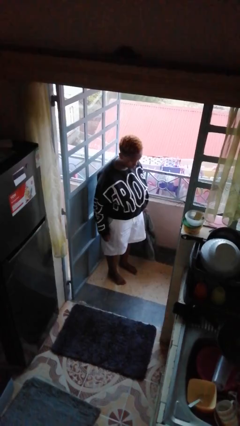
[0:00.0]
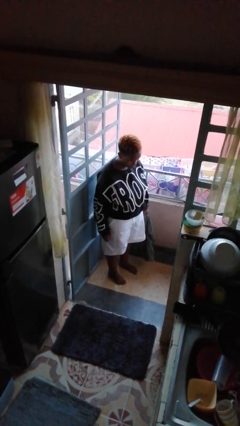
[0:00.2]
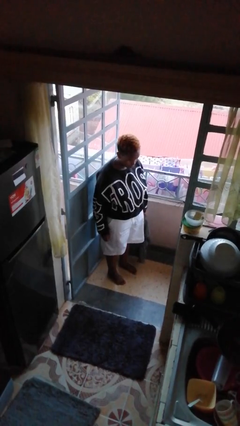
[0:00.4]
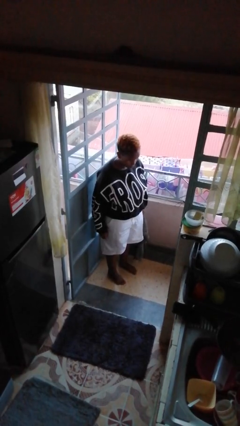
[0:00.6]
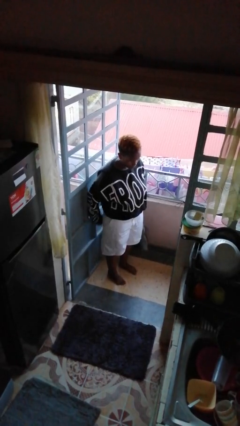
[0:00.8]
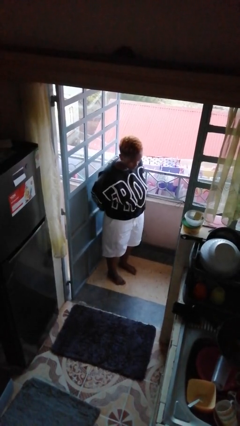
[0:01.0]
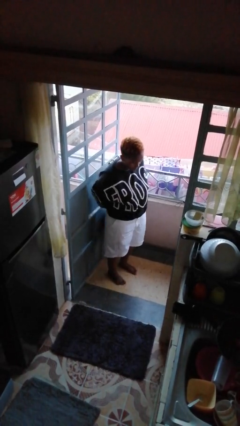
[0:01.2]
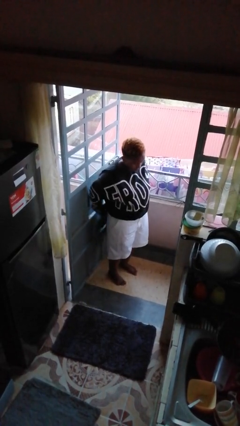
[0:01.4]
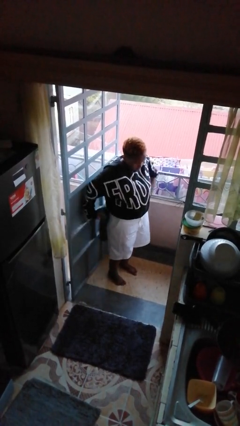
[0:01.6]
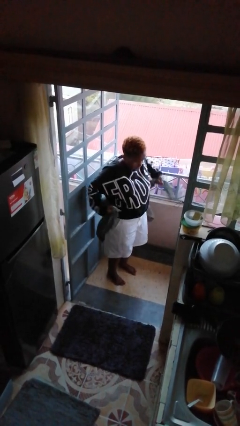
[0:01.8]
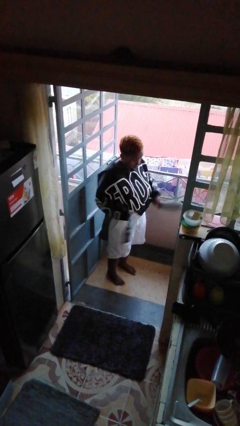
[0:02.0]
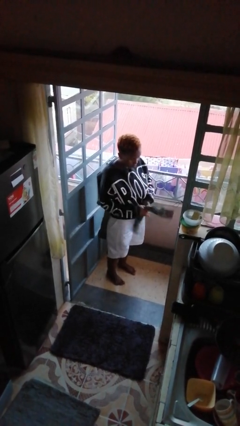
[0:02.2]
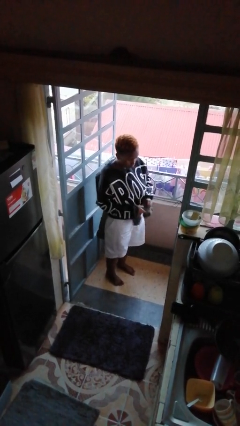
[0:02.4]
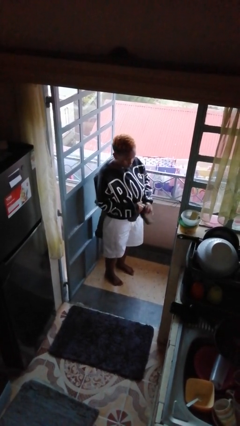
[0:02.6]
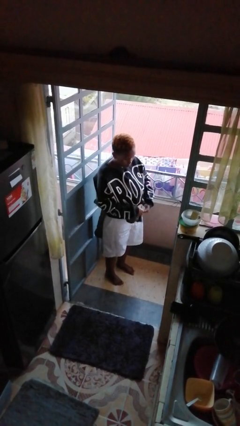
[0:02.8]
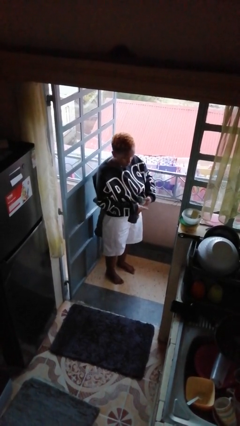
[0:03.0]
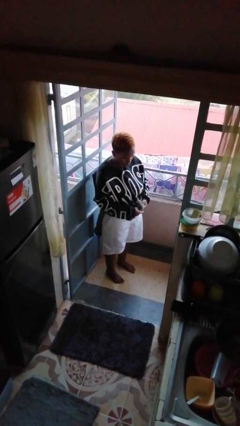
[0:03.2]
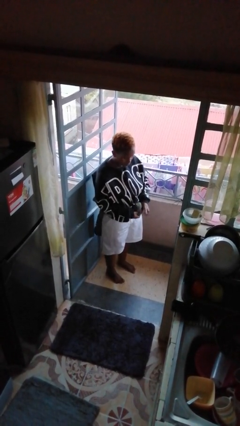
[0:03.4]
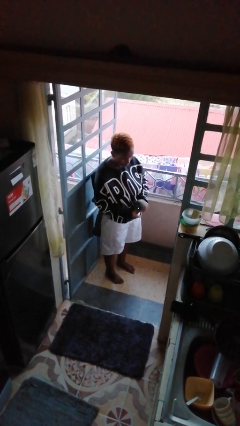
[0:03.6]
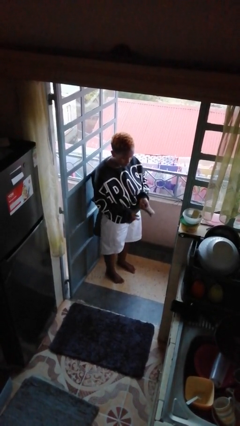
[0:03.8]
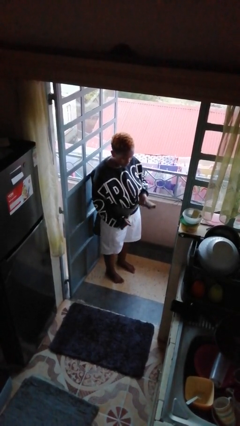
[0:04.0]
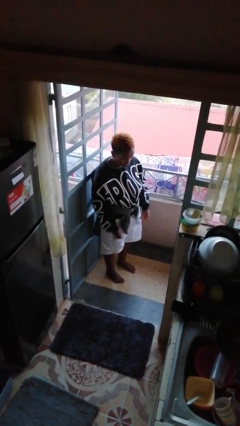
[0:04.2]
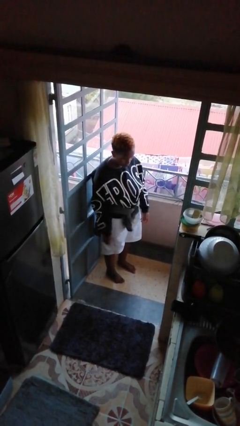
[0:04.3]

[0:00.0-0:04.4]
person ties jacket around waist

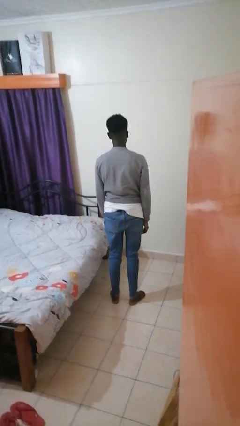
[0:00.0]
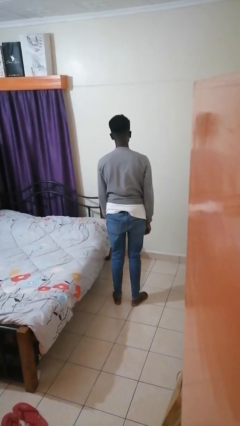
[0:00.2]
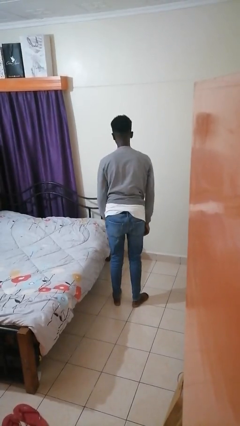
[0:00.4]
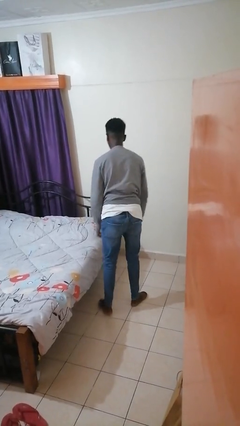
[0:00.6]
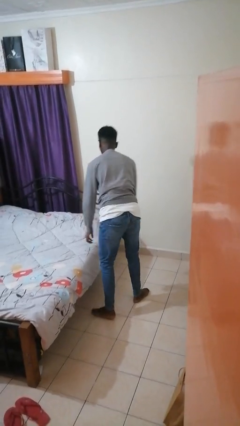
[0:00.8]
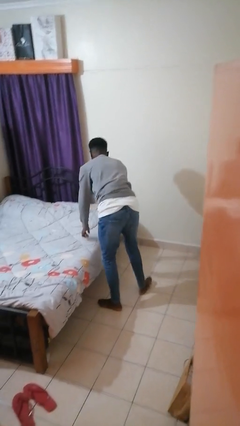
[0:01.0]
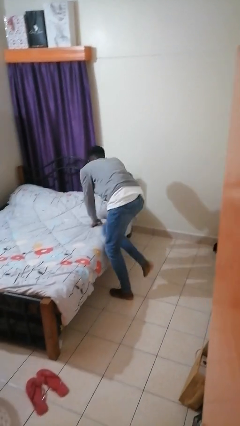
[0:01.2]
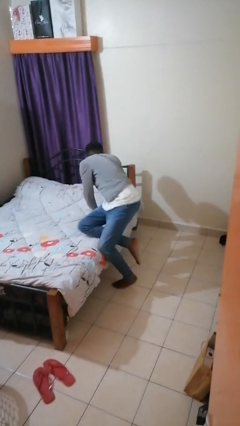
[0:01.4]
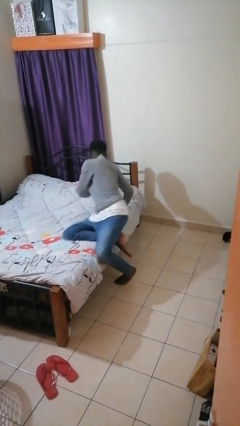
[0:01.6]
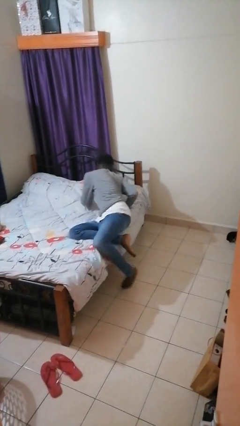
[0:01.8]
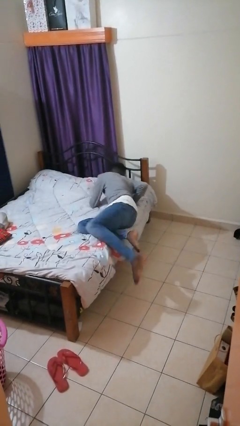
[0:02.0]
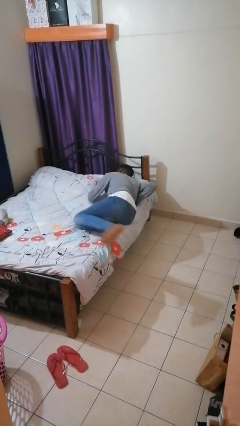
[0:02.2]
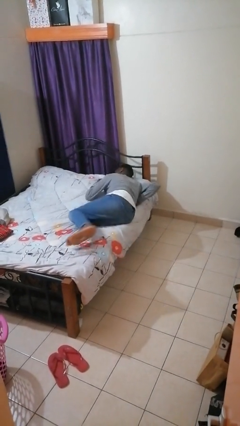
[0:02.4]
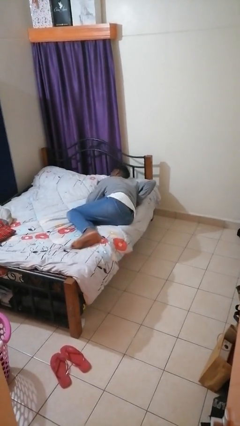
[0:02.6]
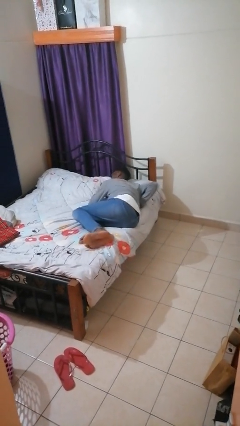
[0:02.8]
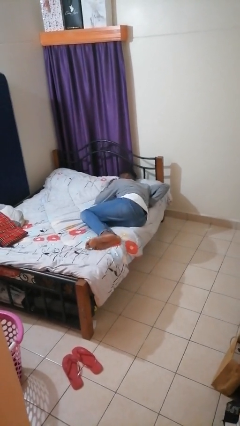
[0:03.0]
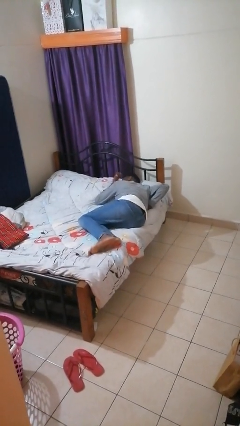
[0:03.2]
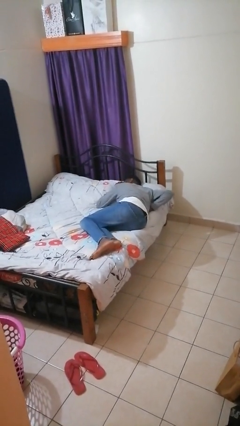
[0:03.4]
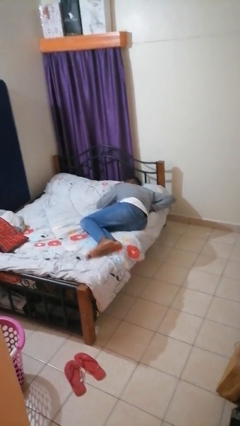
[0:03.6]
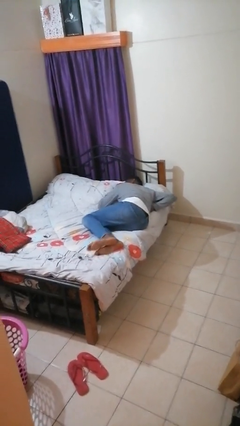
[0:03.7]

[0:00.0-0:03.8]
person lies down on bed

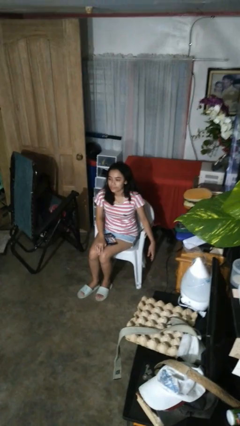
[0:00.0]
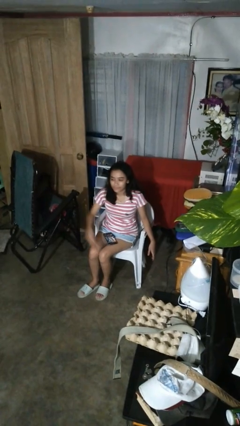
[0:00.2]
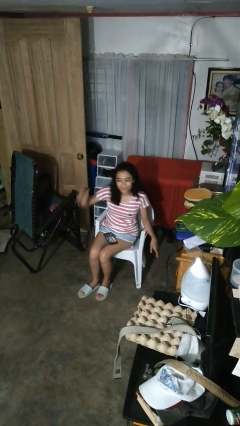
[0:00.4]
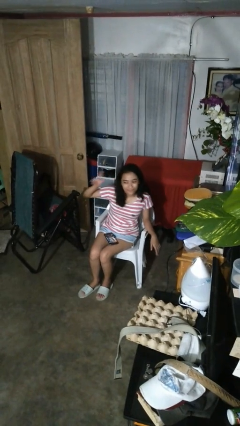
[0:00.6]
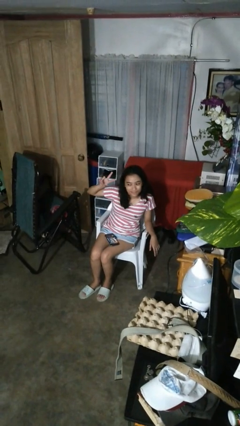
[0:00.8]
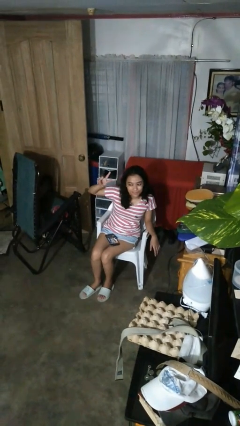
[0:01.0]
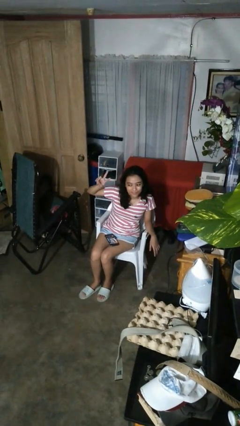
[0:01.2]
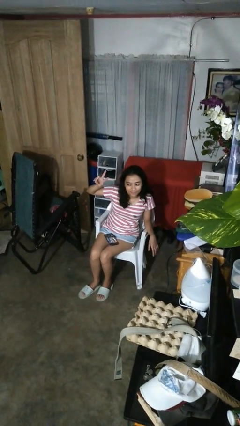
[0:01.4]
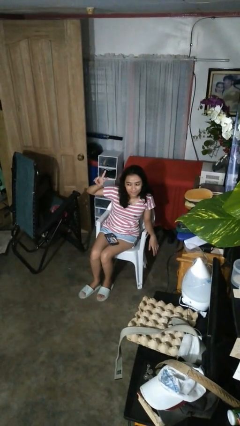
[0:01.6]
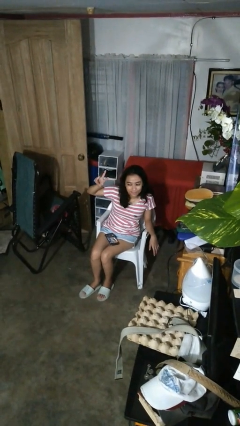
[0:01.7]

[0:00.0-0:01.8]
person gestures peace

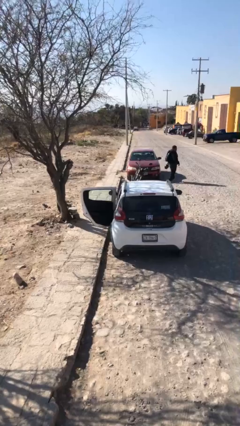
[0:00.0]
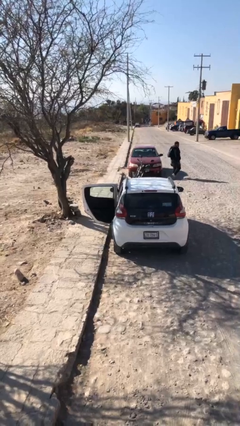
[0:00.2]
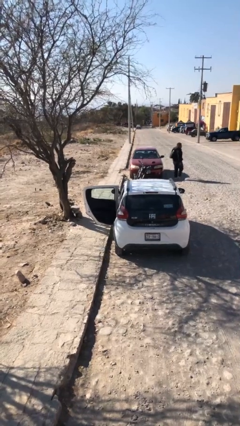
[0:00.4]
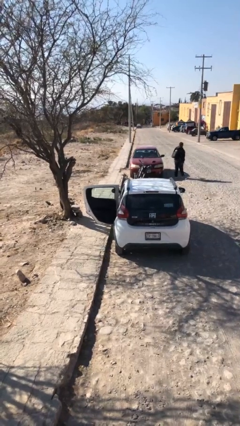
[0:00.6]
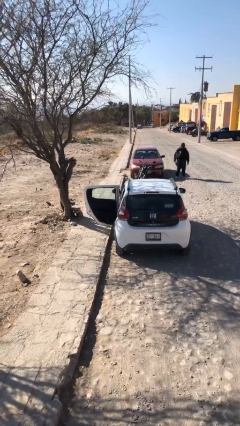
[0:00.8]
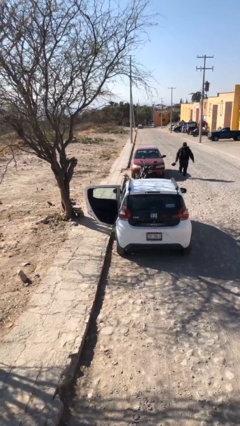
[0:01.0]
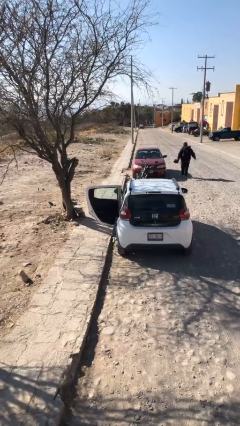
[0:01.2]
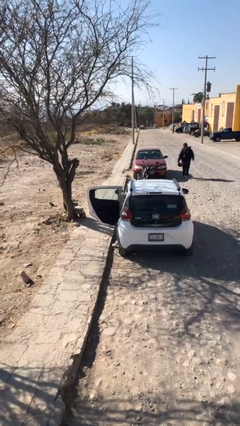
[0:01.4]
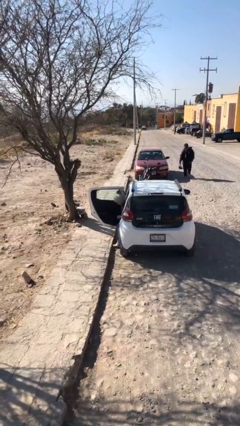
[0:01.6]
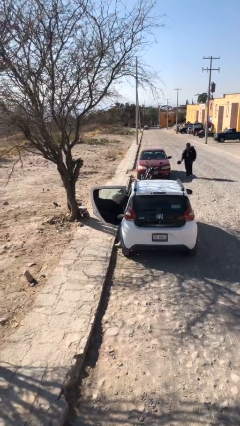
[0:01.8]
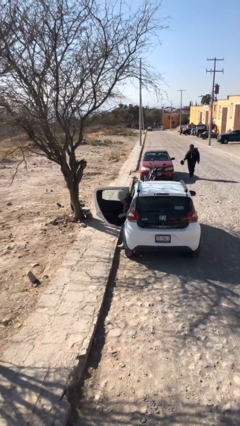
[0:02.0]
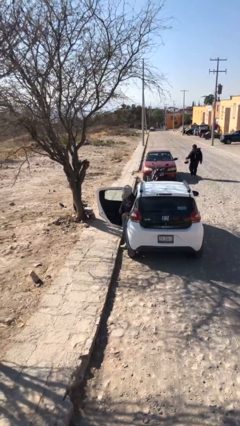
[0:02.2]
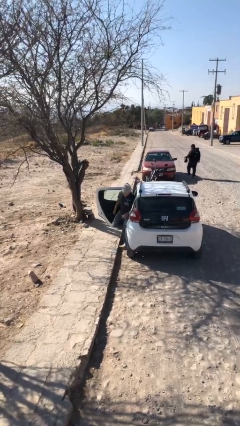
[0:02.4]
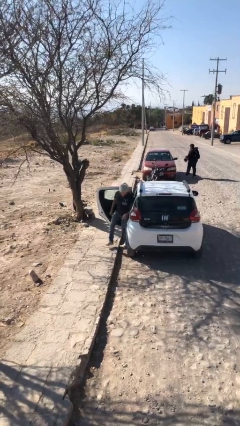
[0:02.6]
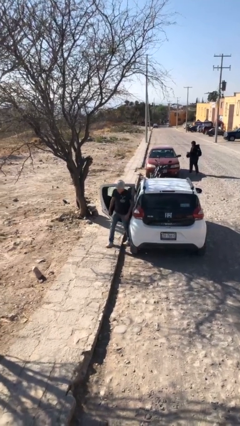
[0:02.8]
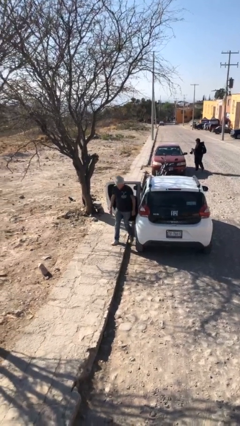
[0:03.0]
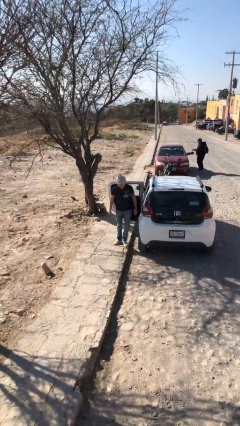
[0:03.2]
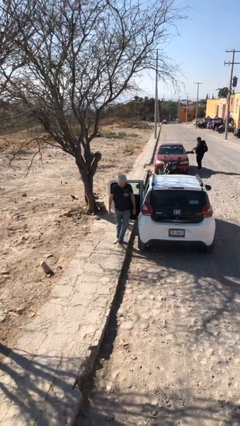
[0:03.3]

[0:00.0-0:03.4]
person exits car

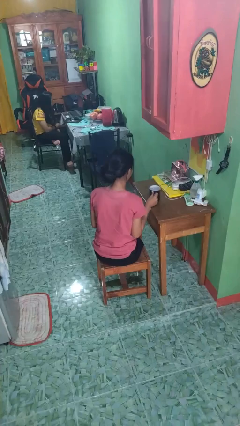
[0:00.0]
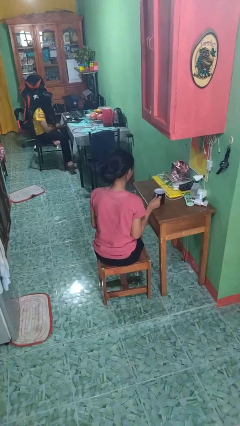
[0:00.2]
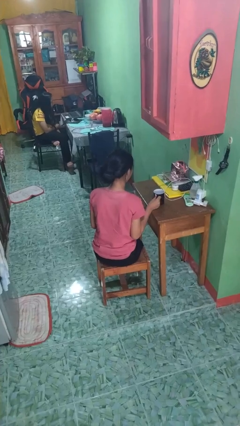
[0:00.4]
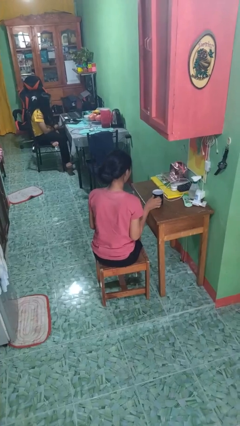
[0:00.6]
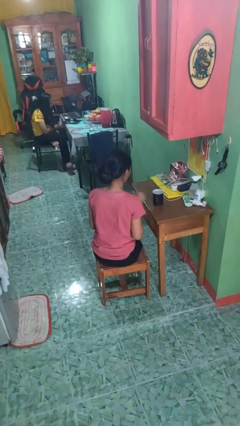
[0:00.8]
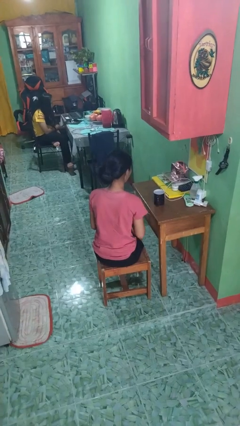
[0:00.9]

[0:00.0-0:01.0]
person puts down object on table

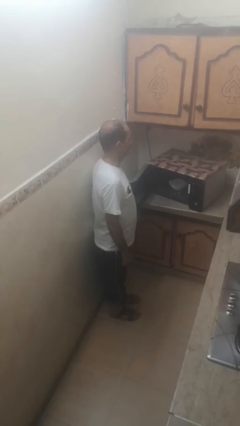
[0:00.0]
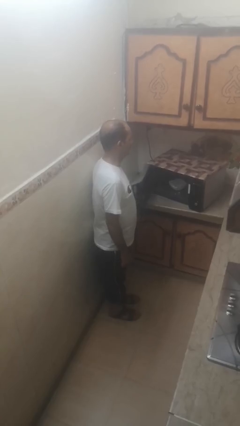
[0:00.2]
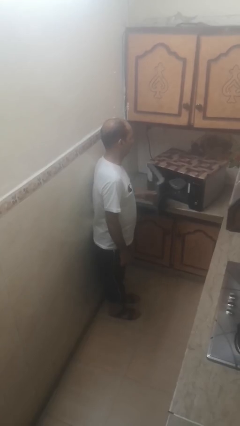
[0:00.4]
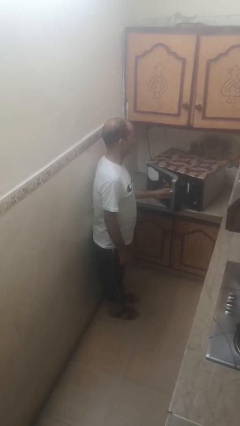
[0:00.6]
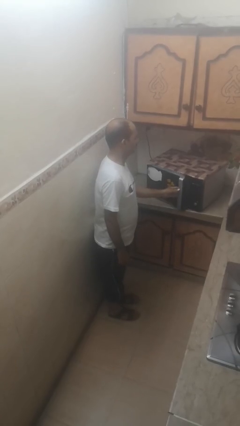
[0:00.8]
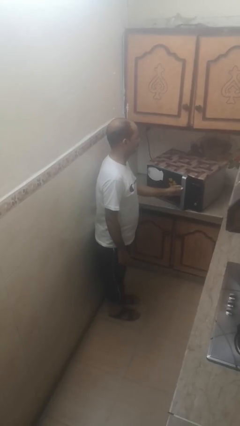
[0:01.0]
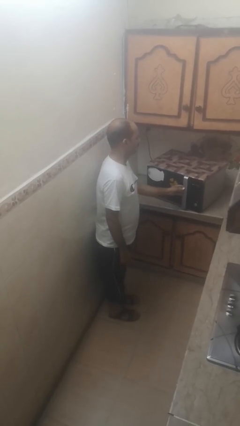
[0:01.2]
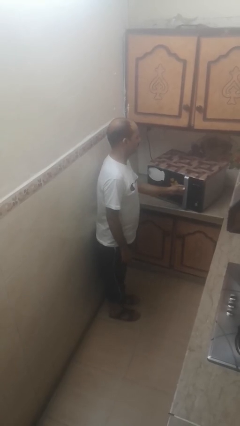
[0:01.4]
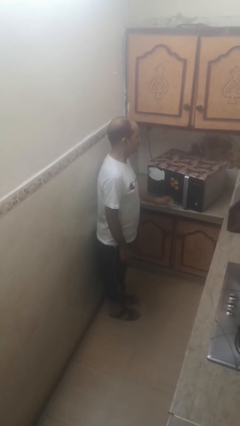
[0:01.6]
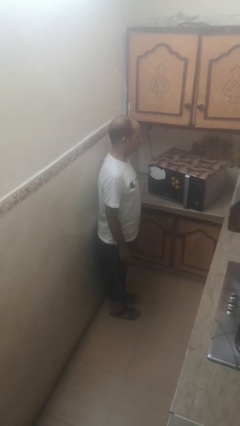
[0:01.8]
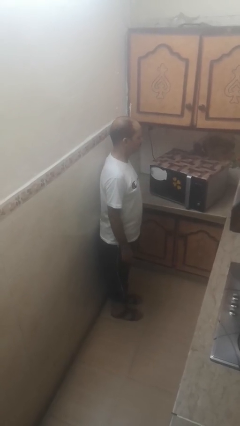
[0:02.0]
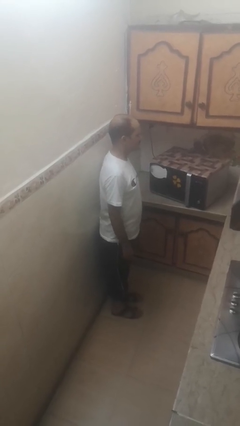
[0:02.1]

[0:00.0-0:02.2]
person closes microwave

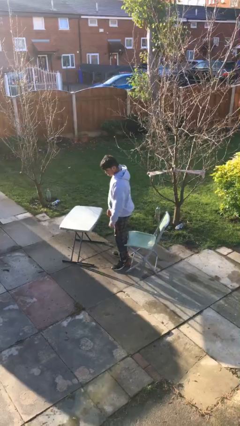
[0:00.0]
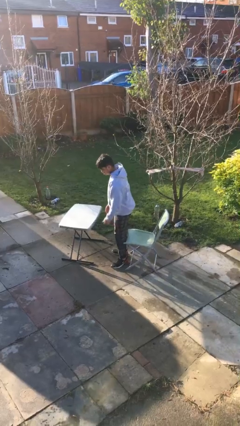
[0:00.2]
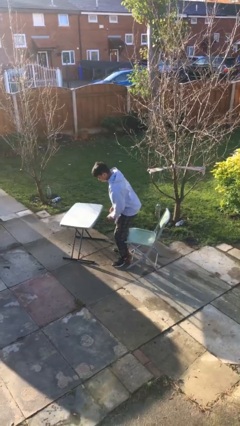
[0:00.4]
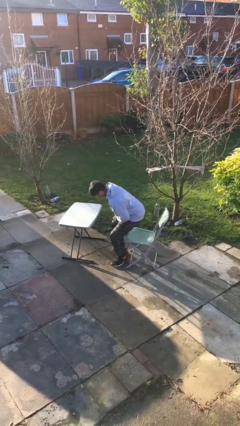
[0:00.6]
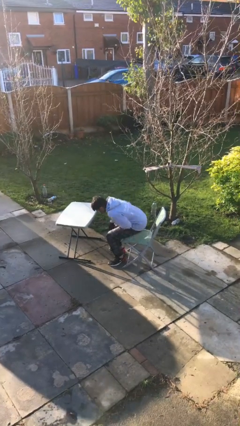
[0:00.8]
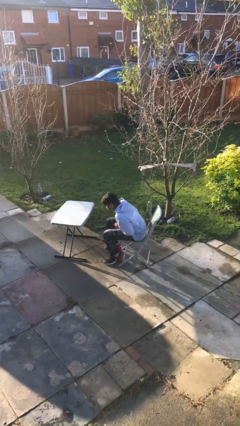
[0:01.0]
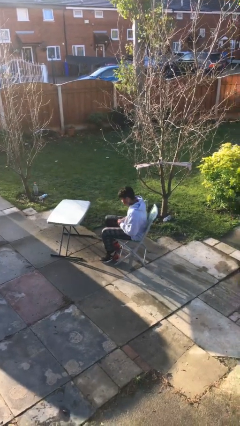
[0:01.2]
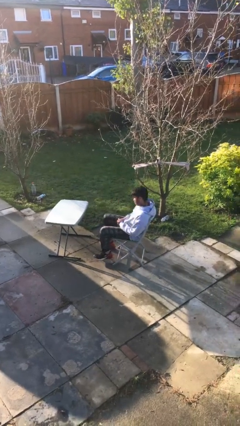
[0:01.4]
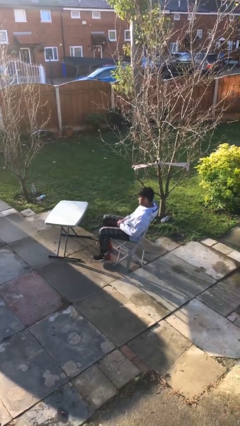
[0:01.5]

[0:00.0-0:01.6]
person sits down
